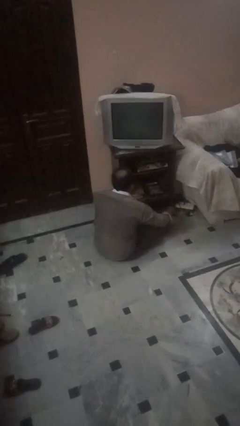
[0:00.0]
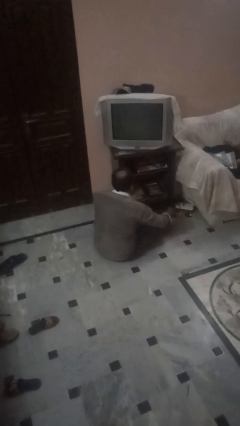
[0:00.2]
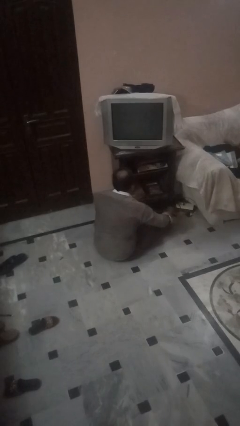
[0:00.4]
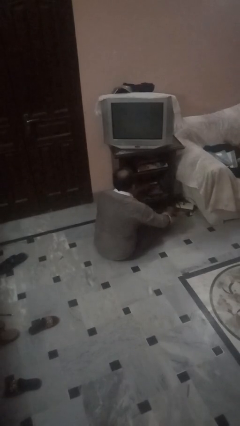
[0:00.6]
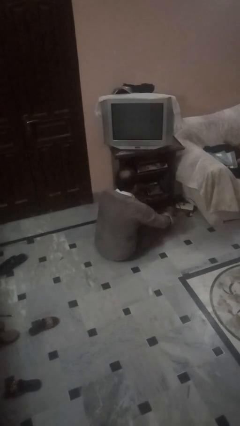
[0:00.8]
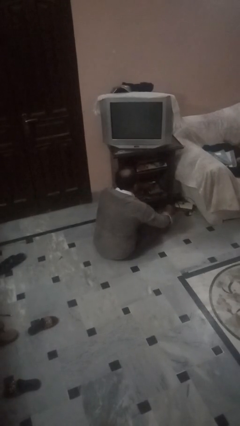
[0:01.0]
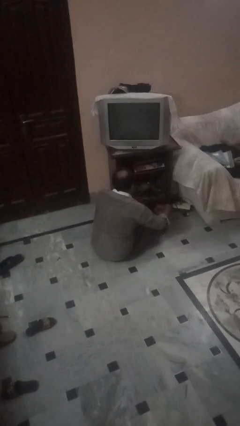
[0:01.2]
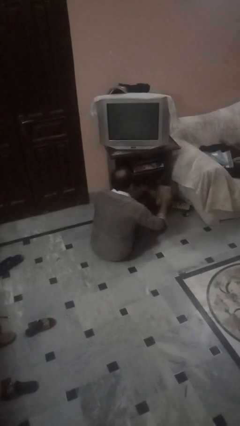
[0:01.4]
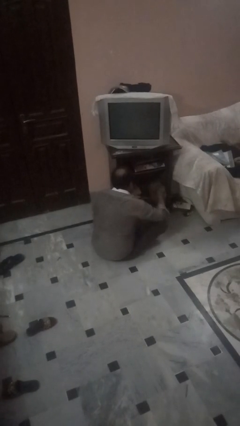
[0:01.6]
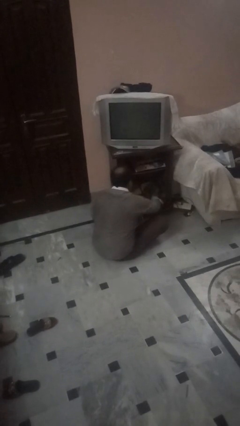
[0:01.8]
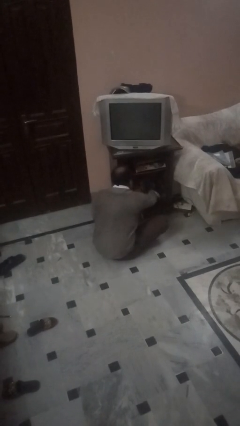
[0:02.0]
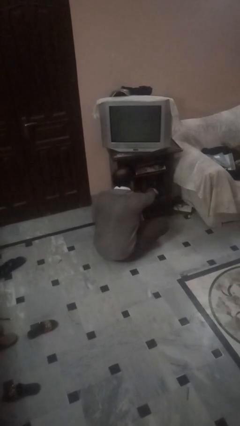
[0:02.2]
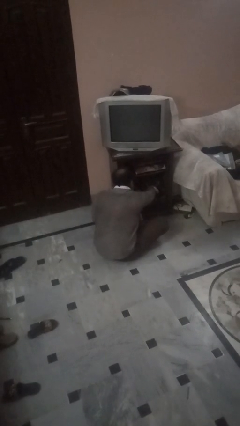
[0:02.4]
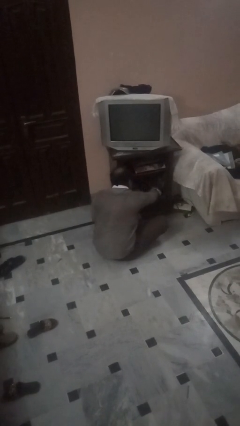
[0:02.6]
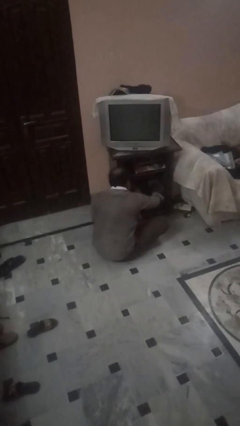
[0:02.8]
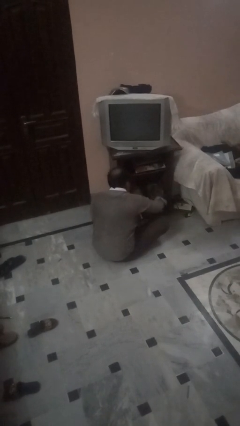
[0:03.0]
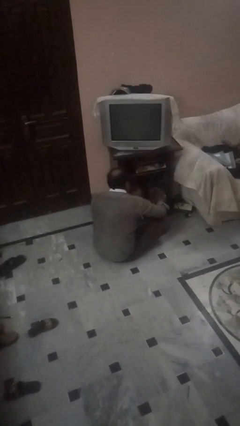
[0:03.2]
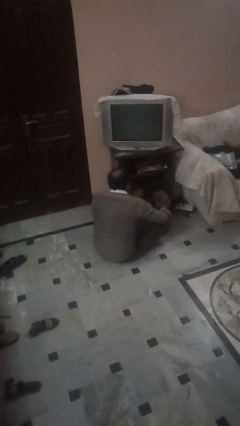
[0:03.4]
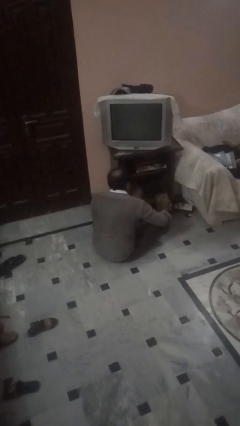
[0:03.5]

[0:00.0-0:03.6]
person dusts furniture

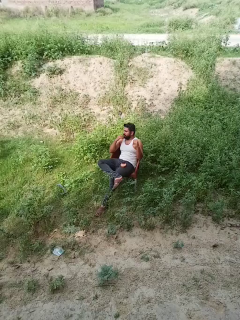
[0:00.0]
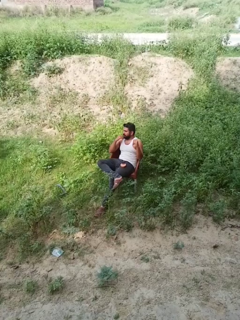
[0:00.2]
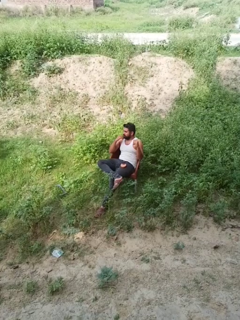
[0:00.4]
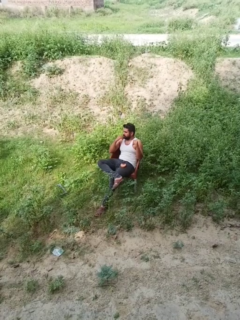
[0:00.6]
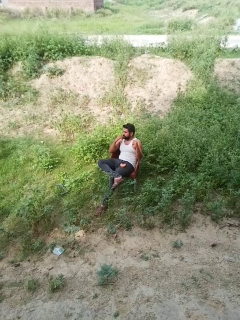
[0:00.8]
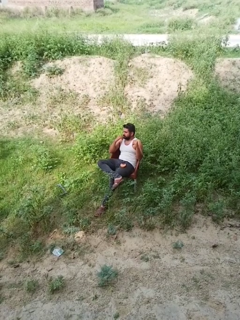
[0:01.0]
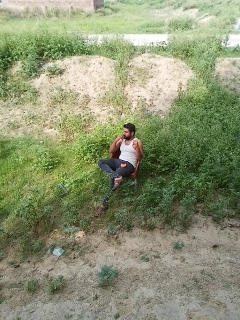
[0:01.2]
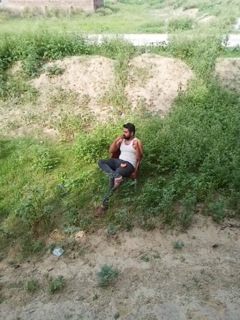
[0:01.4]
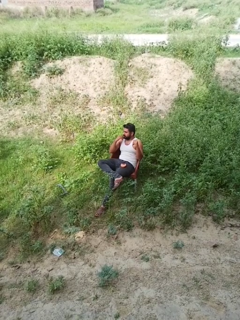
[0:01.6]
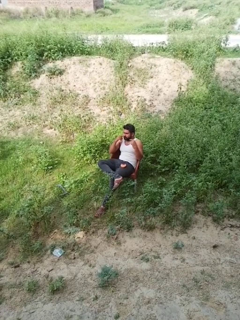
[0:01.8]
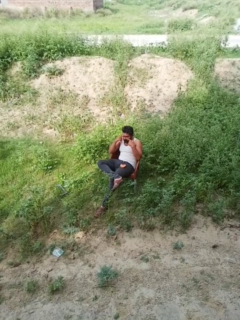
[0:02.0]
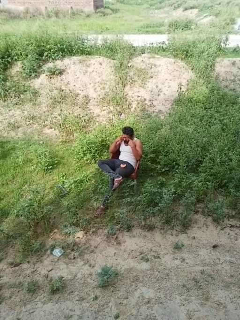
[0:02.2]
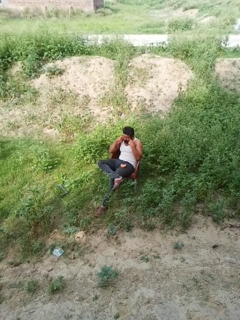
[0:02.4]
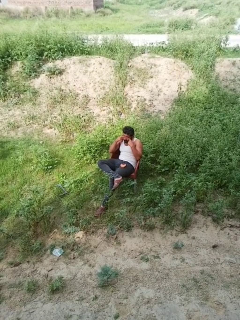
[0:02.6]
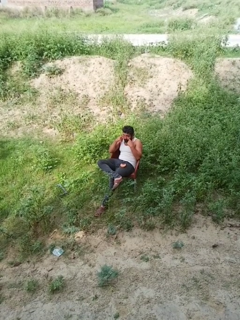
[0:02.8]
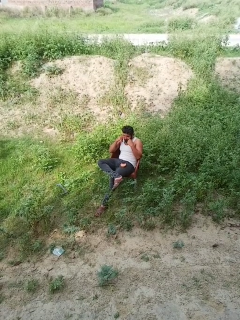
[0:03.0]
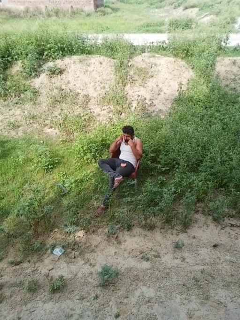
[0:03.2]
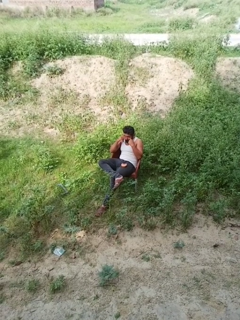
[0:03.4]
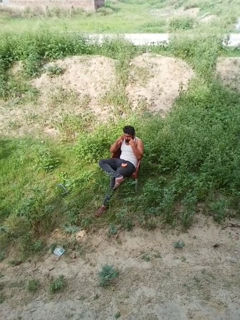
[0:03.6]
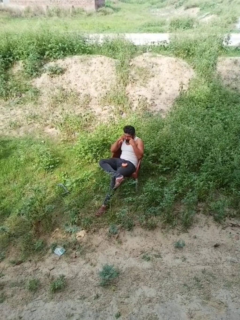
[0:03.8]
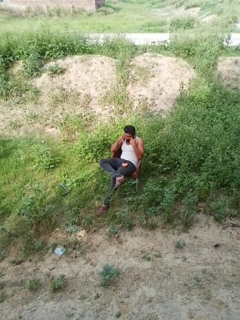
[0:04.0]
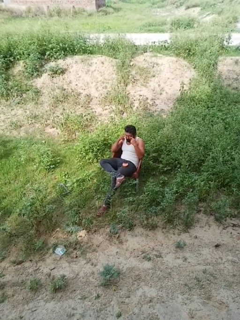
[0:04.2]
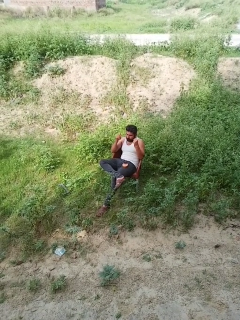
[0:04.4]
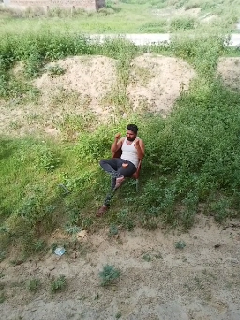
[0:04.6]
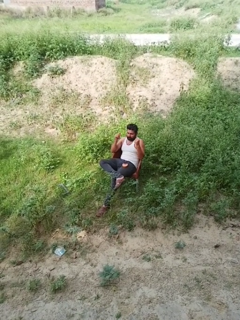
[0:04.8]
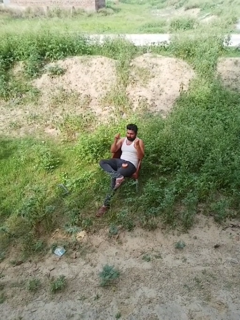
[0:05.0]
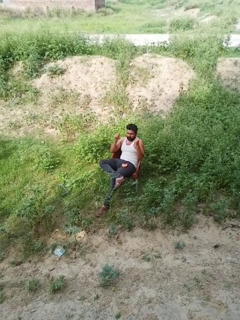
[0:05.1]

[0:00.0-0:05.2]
person rubs eyes

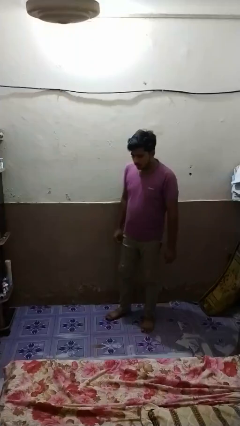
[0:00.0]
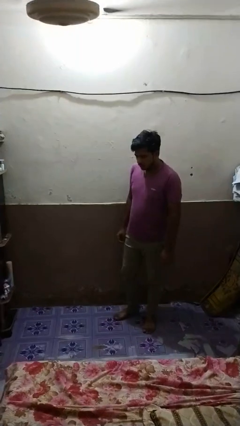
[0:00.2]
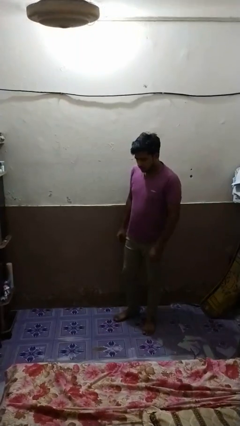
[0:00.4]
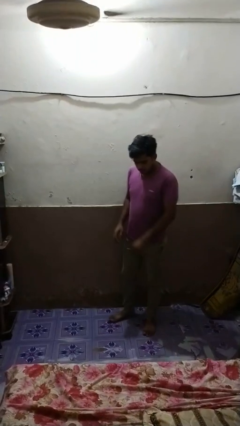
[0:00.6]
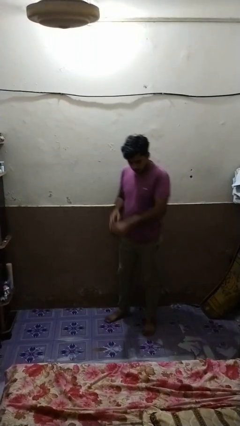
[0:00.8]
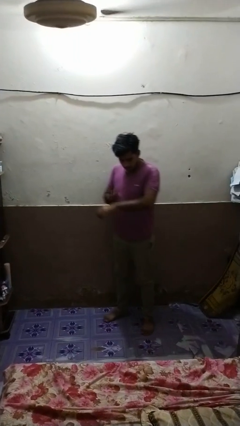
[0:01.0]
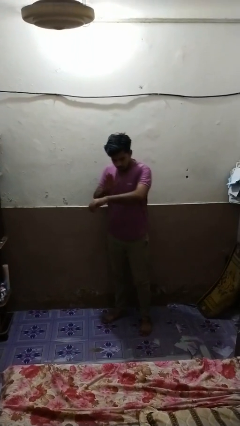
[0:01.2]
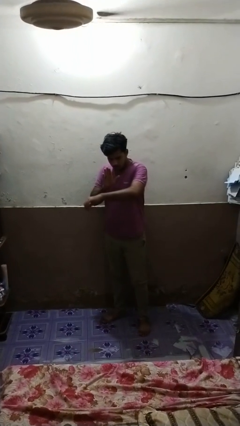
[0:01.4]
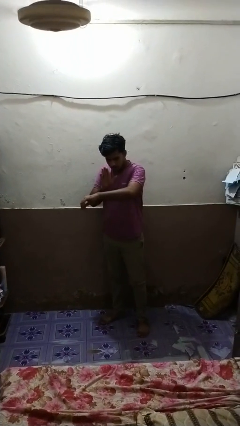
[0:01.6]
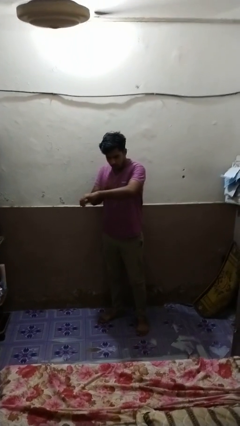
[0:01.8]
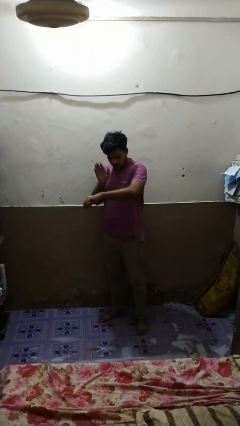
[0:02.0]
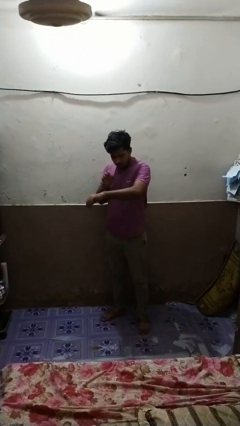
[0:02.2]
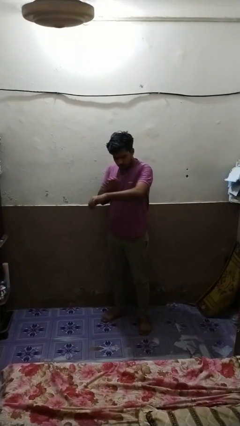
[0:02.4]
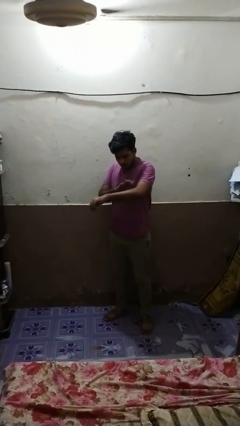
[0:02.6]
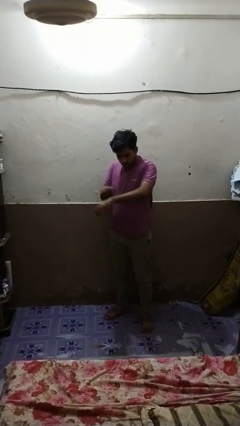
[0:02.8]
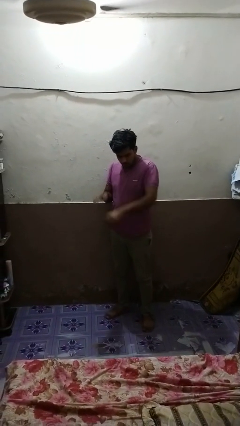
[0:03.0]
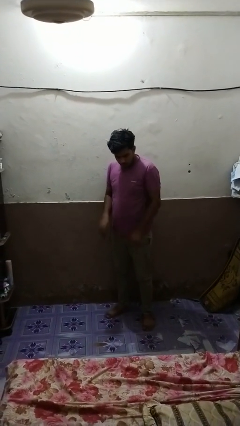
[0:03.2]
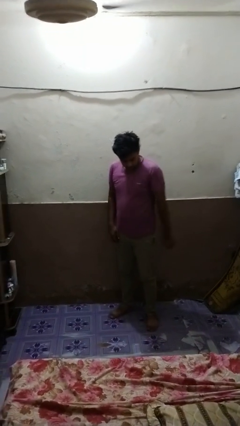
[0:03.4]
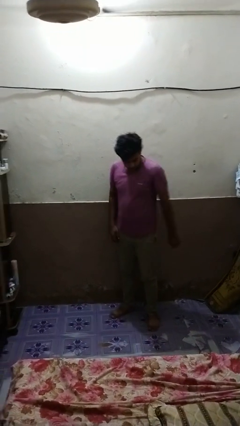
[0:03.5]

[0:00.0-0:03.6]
person swats bug

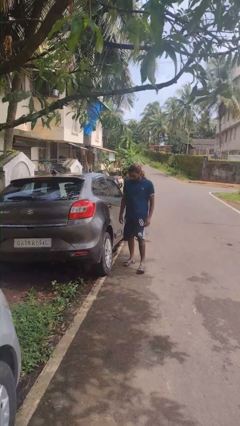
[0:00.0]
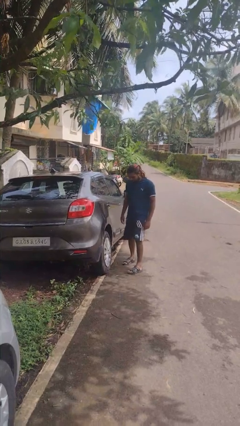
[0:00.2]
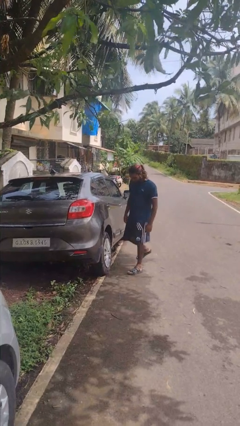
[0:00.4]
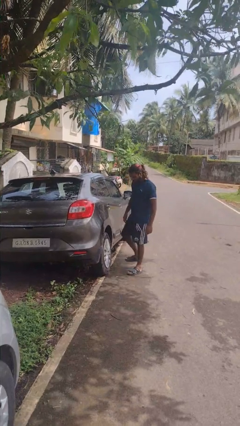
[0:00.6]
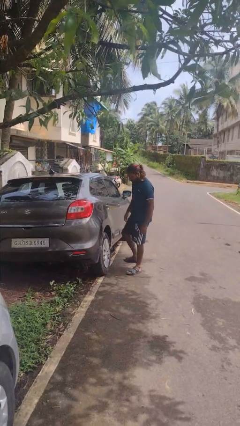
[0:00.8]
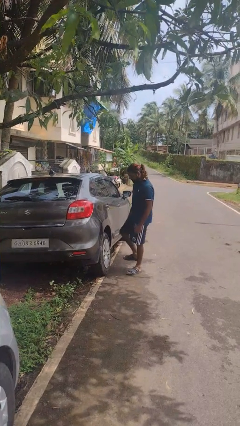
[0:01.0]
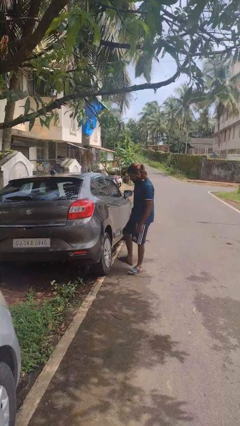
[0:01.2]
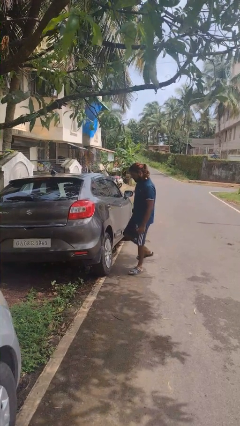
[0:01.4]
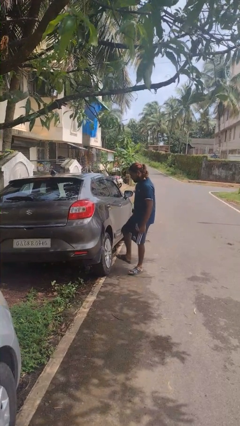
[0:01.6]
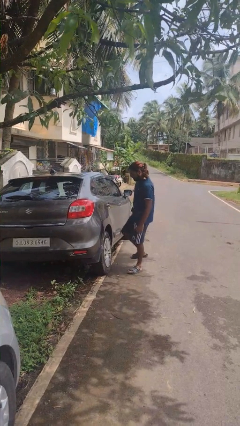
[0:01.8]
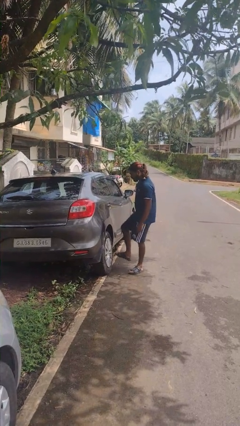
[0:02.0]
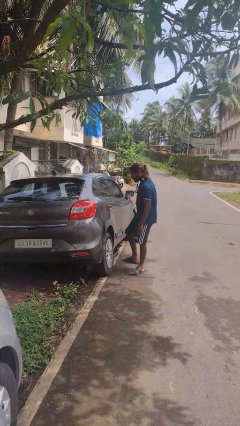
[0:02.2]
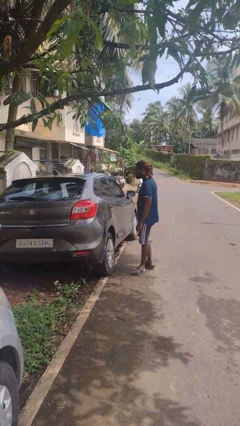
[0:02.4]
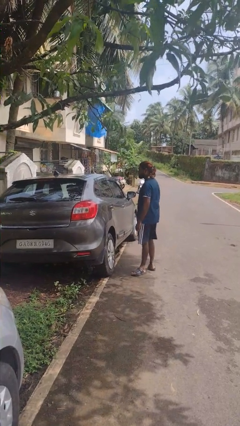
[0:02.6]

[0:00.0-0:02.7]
person kicks car tires

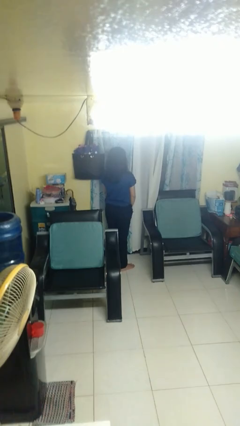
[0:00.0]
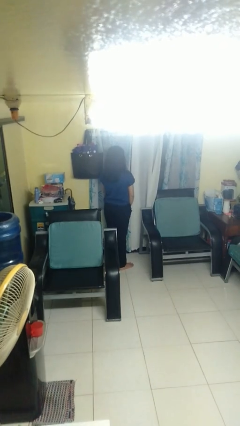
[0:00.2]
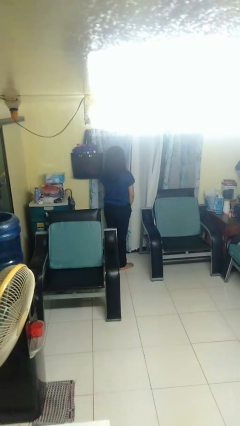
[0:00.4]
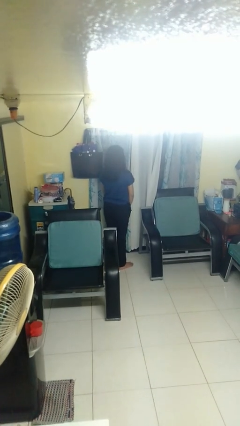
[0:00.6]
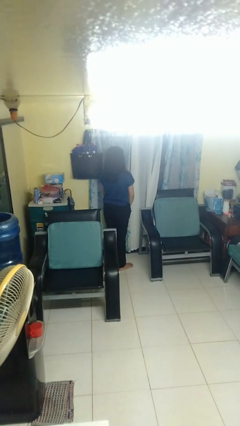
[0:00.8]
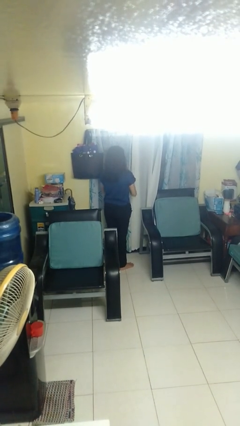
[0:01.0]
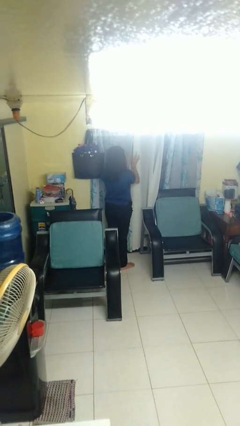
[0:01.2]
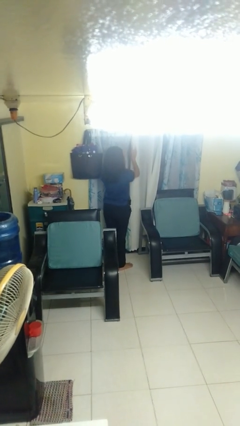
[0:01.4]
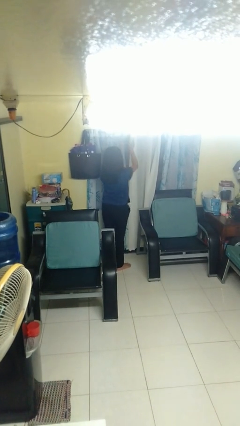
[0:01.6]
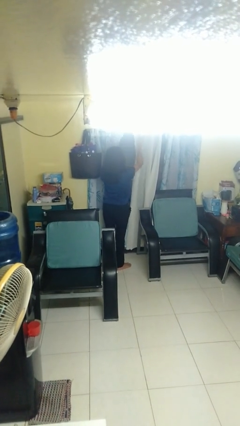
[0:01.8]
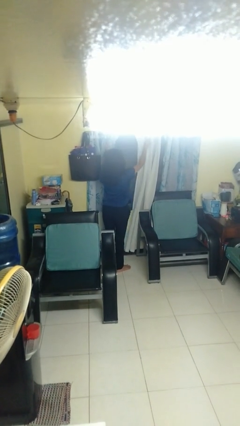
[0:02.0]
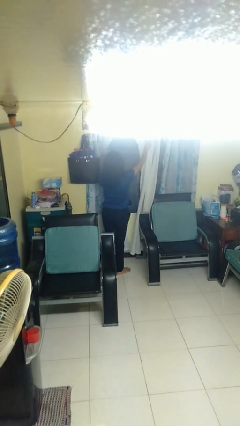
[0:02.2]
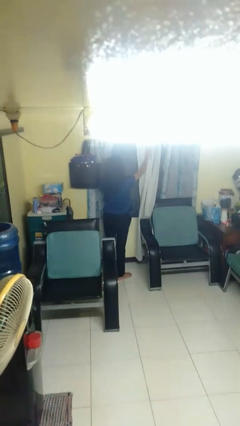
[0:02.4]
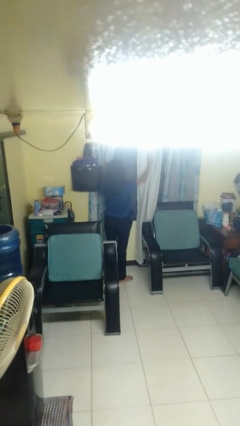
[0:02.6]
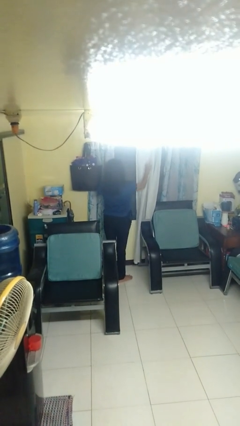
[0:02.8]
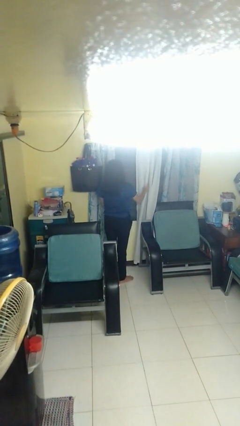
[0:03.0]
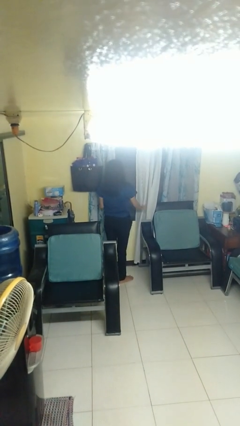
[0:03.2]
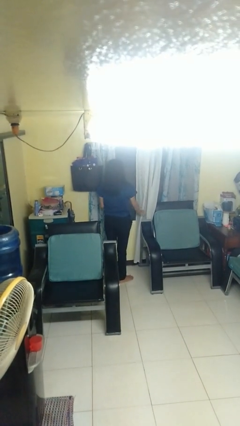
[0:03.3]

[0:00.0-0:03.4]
person opens curtains

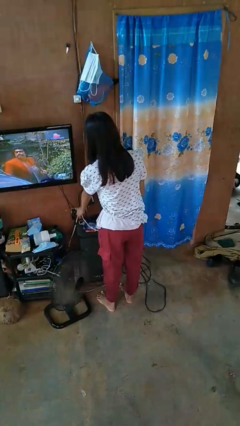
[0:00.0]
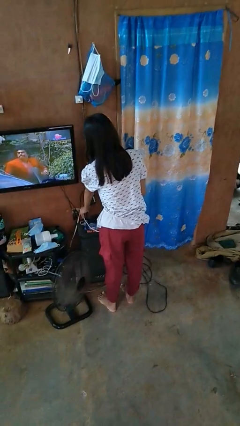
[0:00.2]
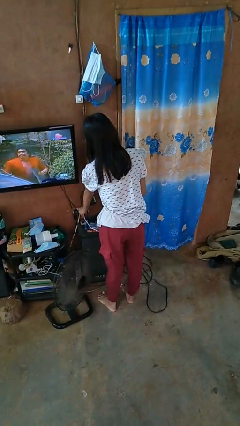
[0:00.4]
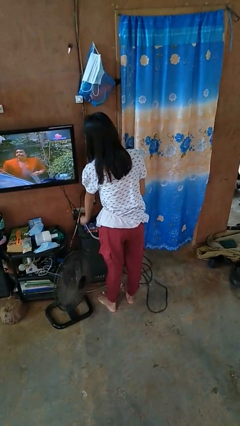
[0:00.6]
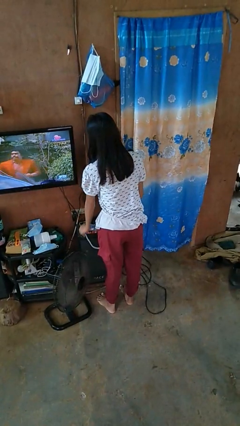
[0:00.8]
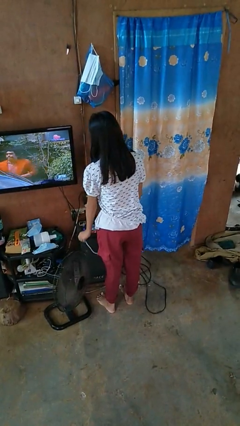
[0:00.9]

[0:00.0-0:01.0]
person unplugs from electrical socket
